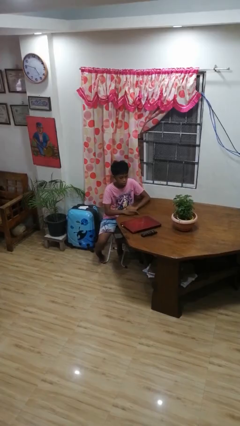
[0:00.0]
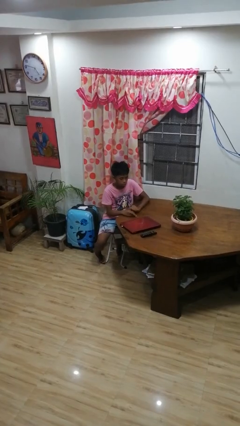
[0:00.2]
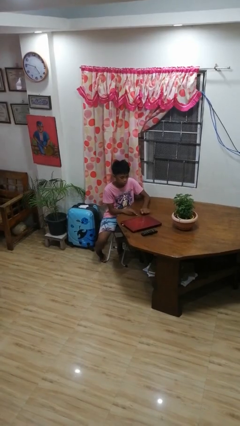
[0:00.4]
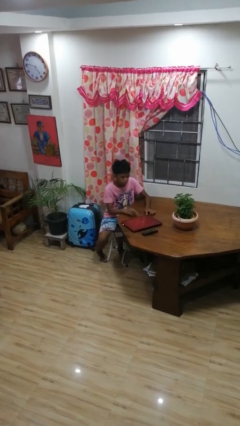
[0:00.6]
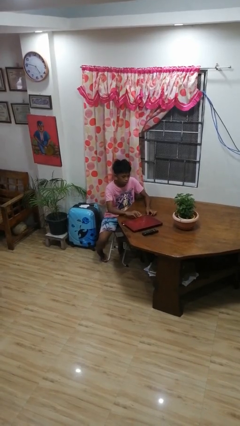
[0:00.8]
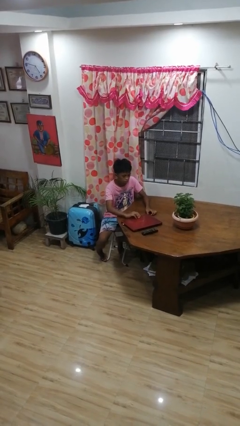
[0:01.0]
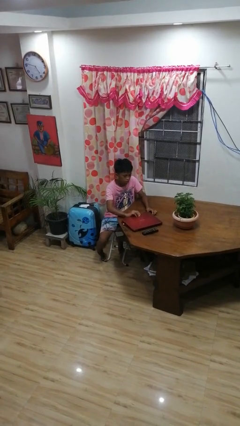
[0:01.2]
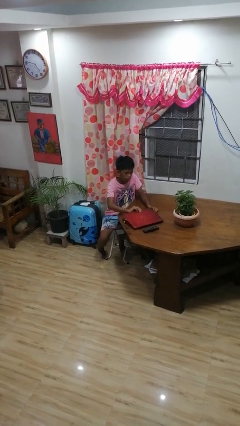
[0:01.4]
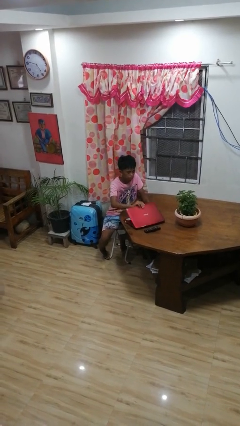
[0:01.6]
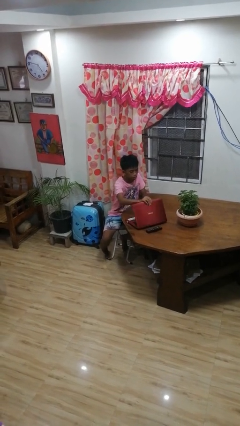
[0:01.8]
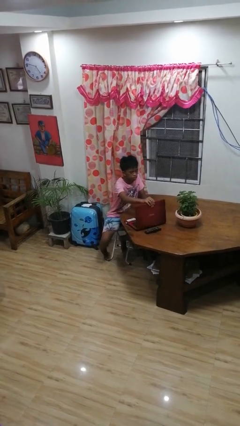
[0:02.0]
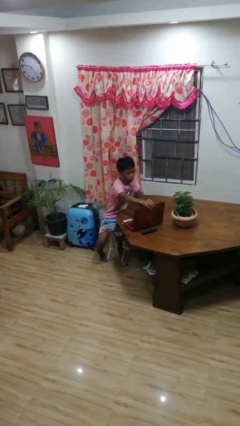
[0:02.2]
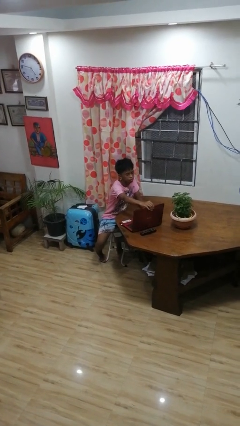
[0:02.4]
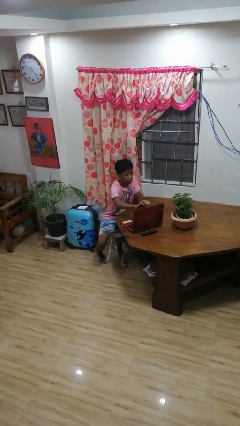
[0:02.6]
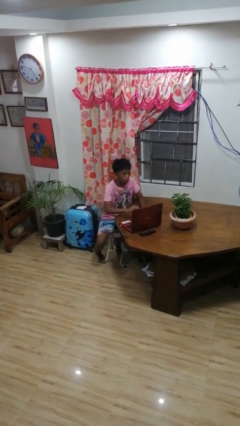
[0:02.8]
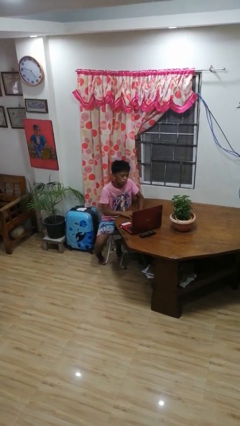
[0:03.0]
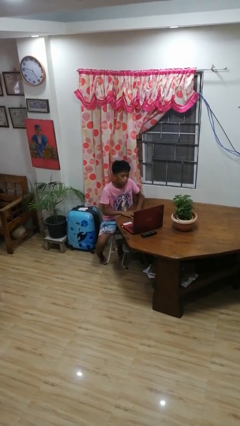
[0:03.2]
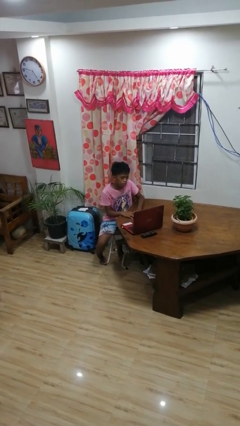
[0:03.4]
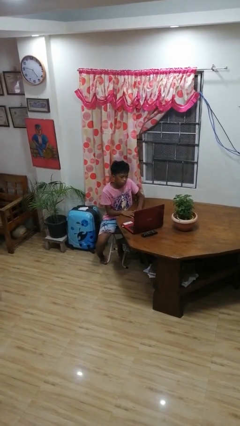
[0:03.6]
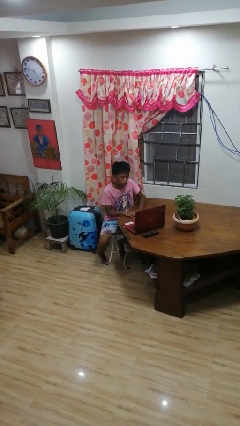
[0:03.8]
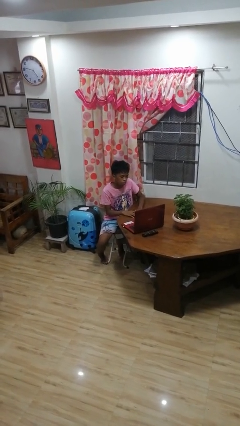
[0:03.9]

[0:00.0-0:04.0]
person opens laptop

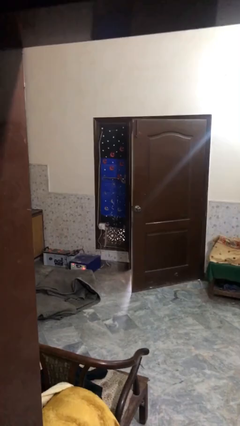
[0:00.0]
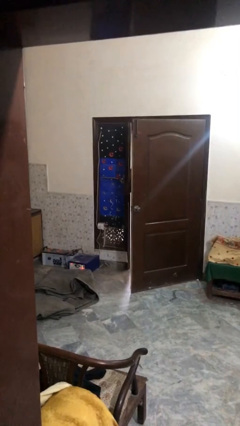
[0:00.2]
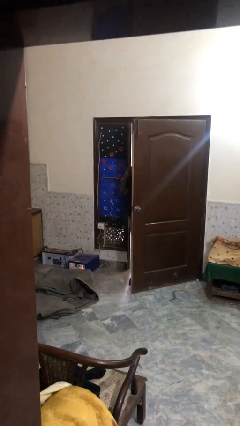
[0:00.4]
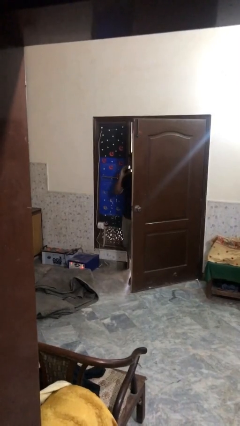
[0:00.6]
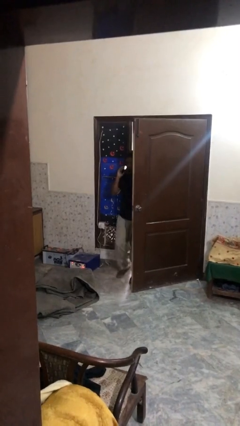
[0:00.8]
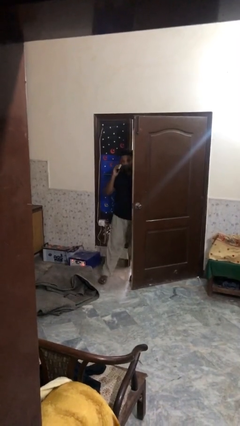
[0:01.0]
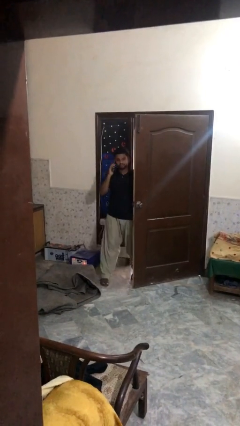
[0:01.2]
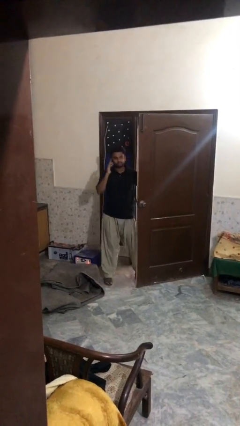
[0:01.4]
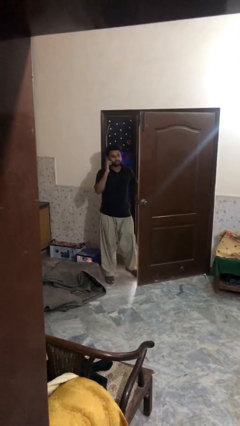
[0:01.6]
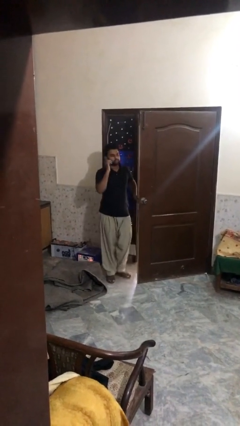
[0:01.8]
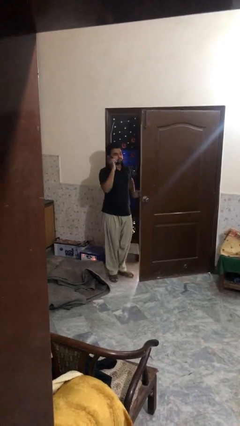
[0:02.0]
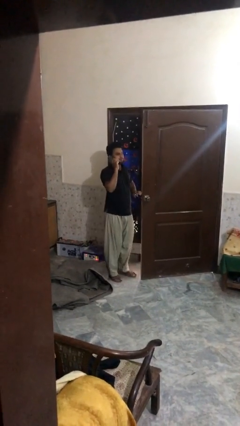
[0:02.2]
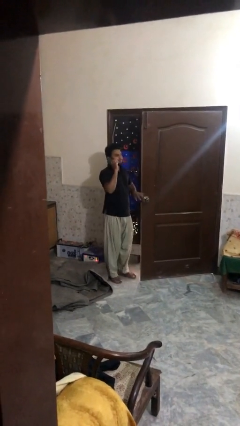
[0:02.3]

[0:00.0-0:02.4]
person enters scene through structure

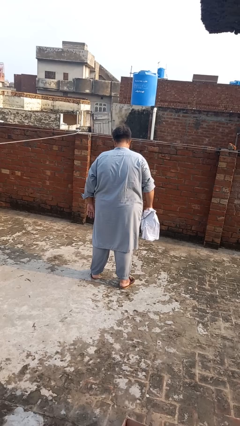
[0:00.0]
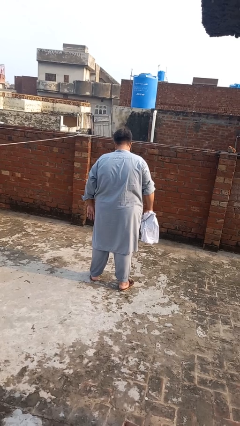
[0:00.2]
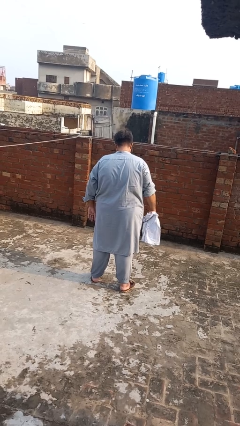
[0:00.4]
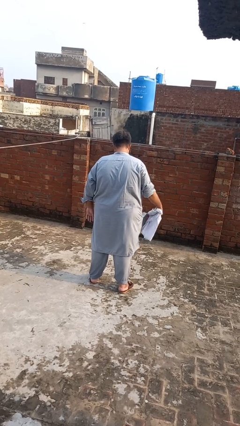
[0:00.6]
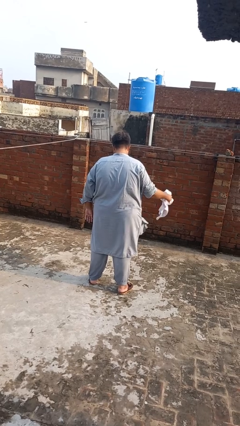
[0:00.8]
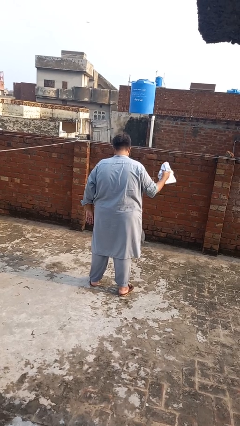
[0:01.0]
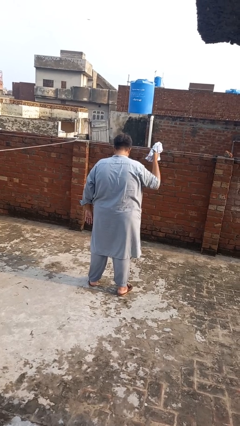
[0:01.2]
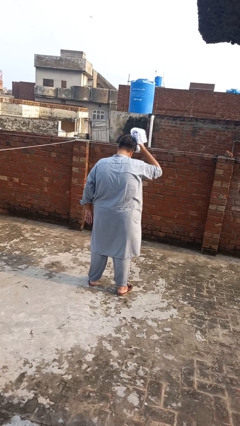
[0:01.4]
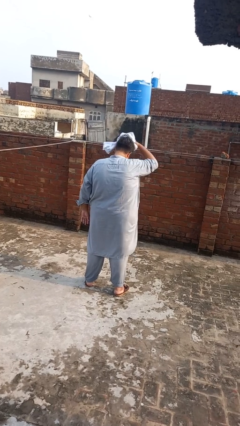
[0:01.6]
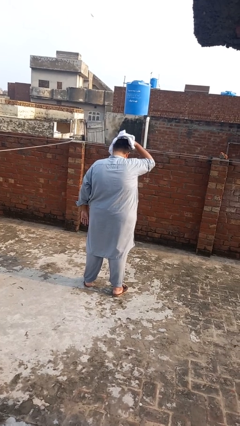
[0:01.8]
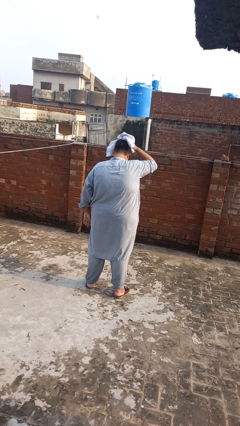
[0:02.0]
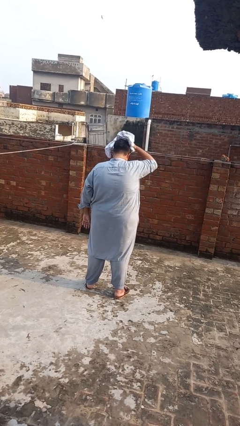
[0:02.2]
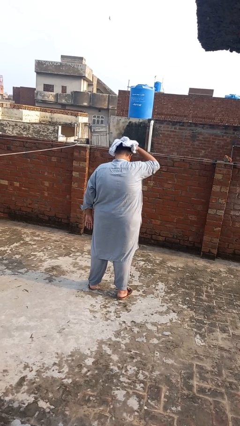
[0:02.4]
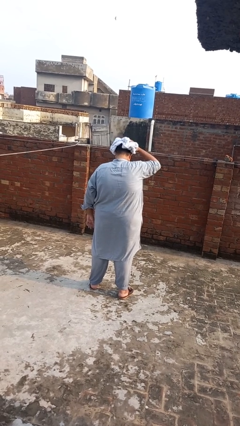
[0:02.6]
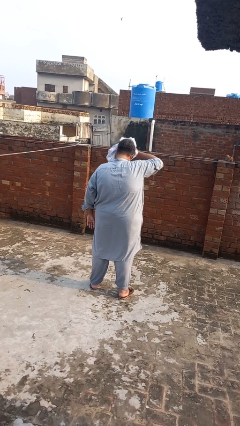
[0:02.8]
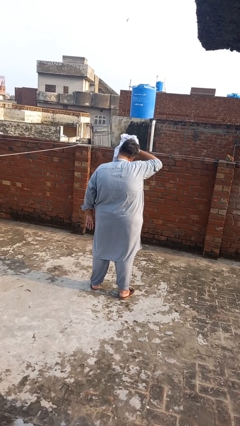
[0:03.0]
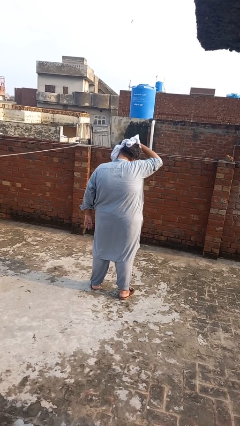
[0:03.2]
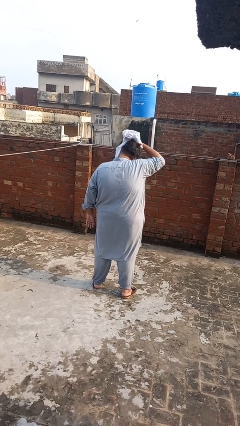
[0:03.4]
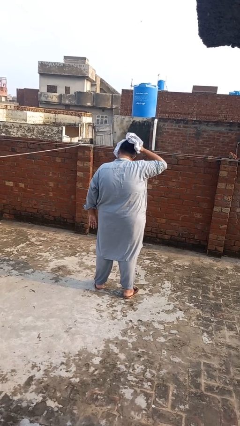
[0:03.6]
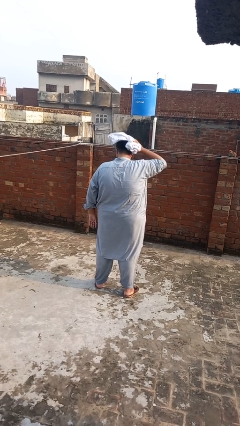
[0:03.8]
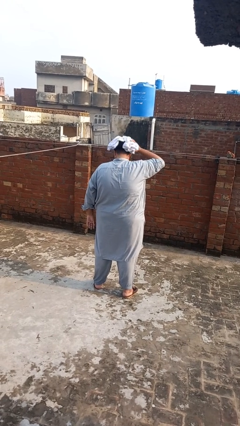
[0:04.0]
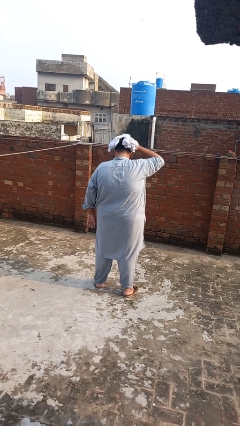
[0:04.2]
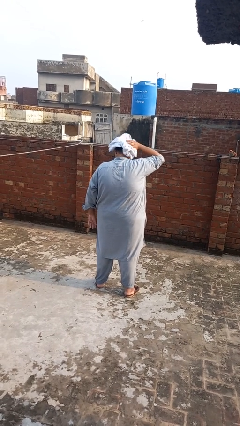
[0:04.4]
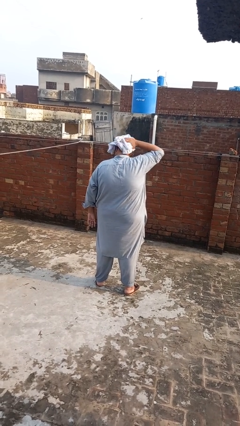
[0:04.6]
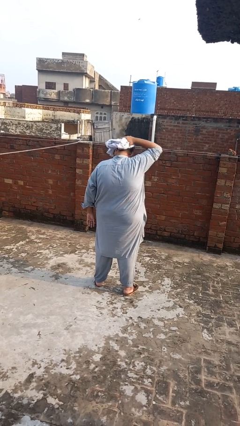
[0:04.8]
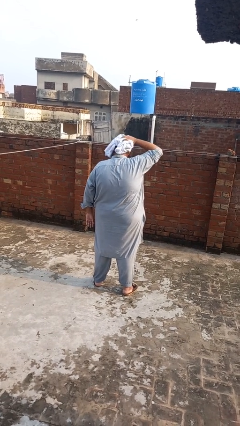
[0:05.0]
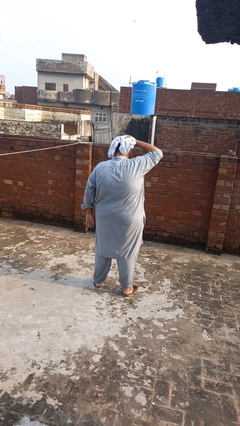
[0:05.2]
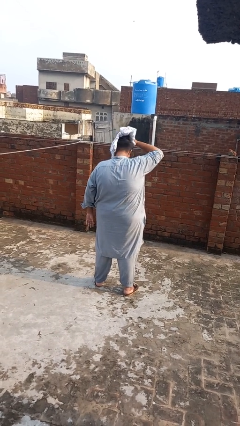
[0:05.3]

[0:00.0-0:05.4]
person dries hair with towel

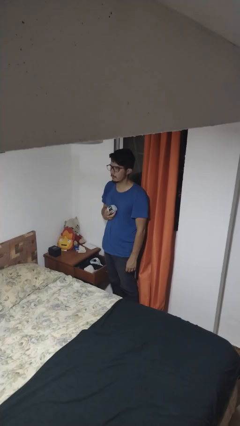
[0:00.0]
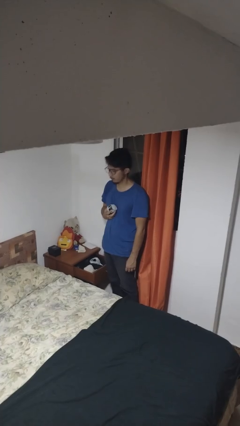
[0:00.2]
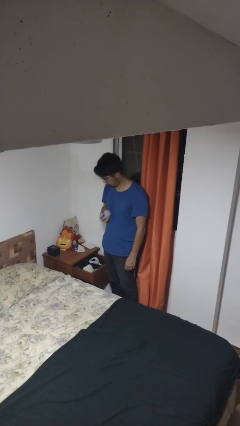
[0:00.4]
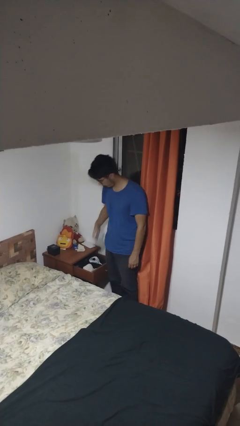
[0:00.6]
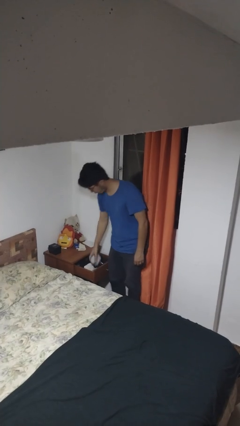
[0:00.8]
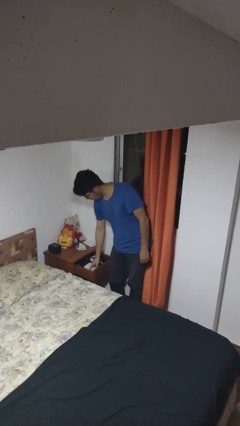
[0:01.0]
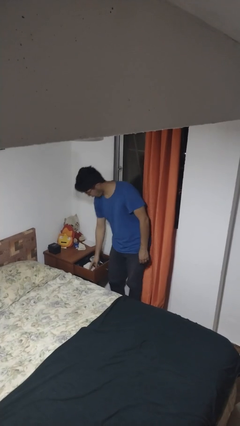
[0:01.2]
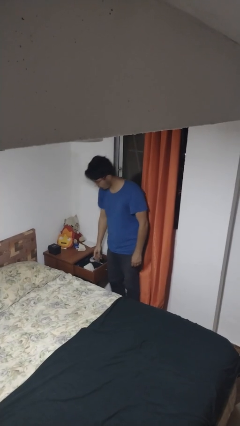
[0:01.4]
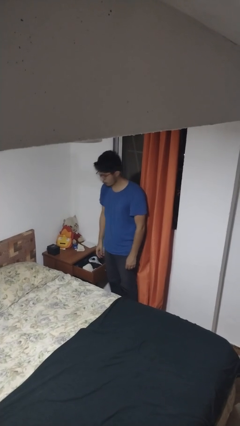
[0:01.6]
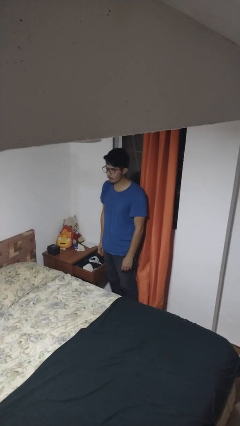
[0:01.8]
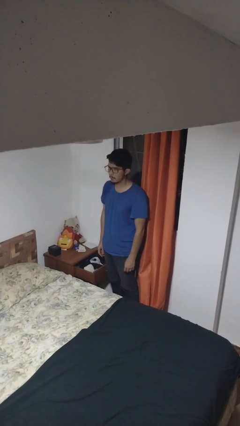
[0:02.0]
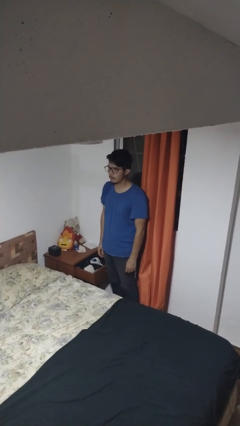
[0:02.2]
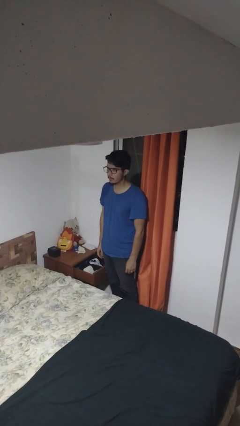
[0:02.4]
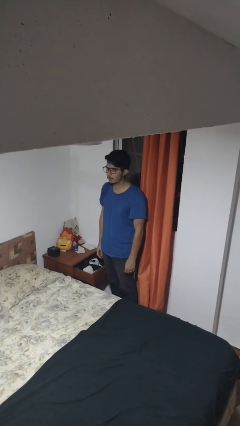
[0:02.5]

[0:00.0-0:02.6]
person puts clothes into dresser

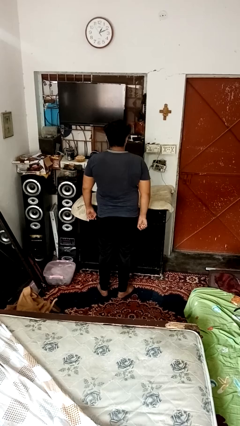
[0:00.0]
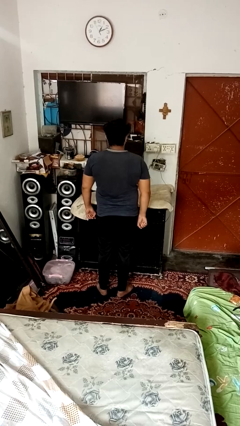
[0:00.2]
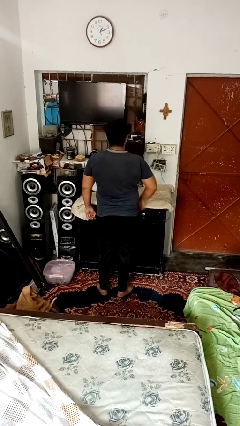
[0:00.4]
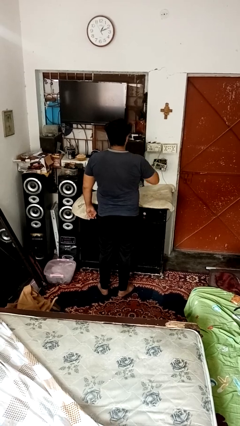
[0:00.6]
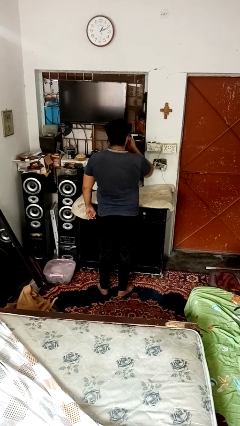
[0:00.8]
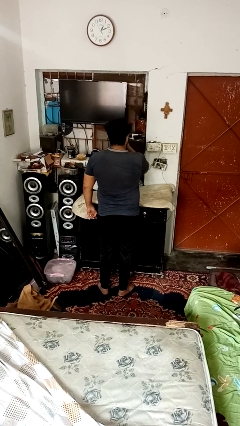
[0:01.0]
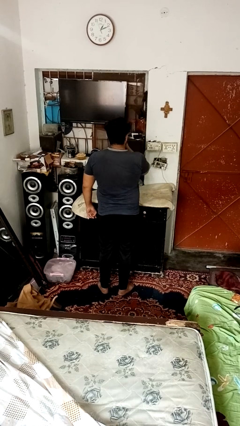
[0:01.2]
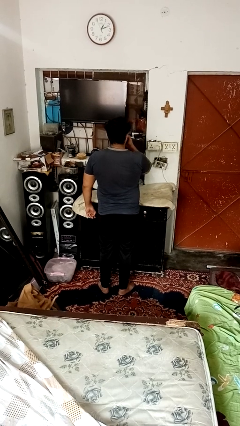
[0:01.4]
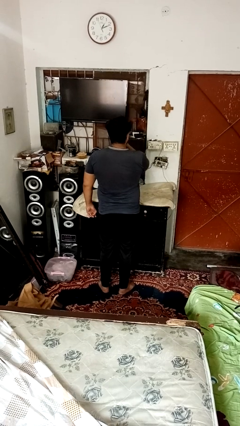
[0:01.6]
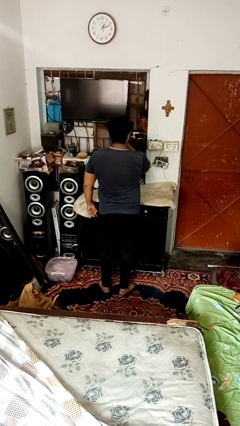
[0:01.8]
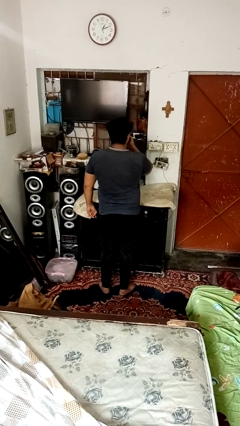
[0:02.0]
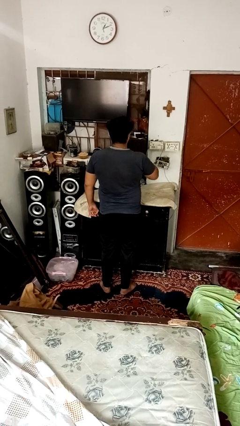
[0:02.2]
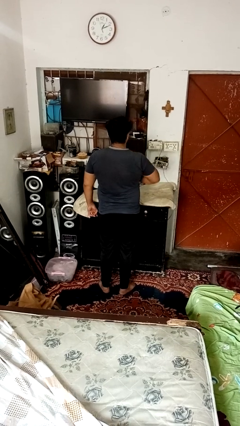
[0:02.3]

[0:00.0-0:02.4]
person applies lip makeup

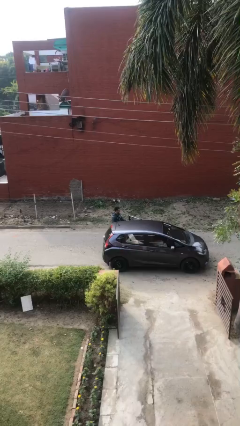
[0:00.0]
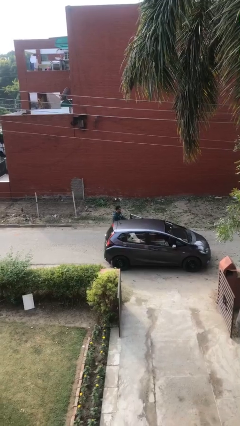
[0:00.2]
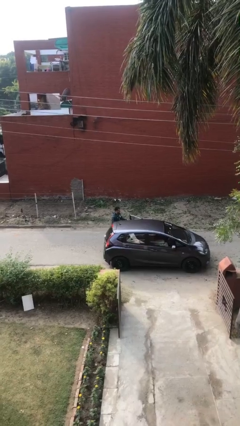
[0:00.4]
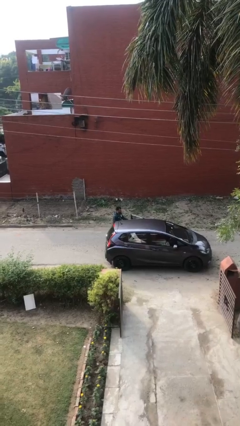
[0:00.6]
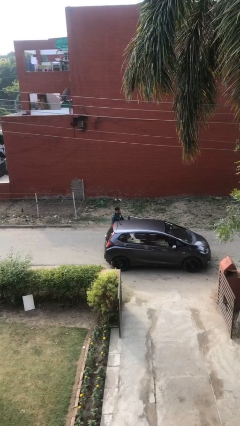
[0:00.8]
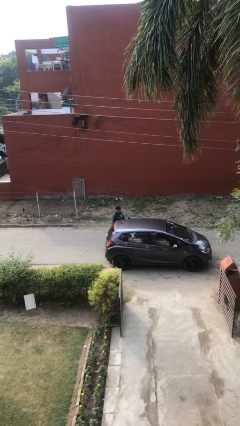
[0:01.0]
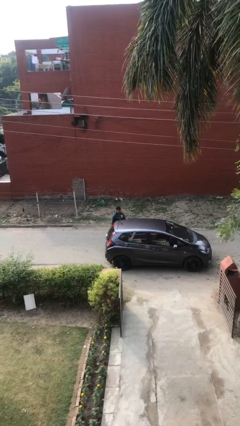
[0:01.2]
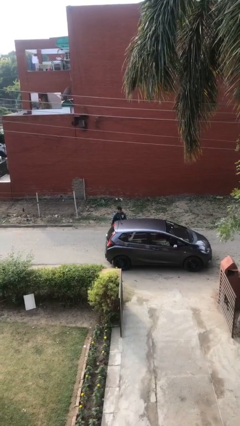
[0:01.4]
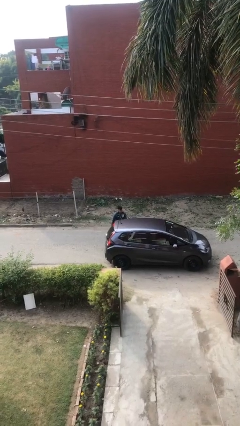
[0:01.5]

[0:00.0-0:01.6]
person closes car door
